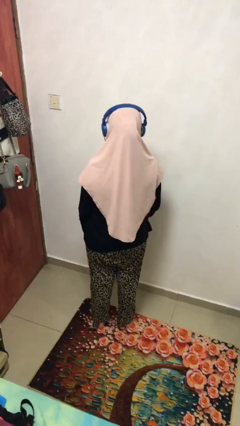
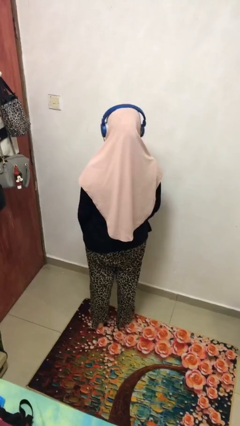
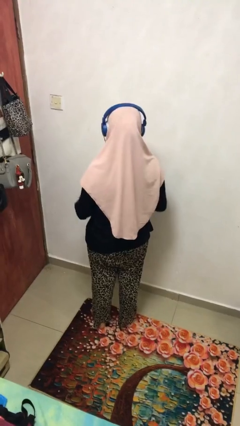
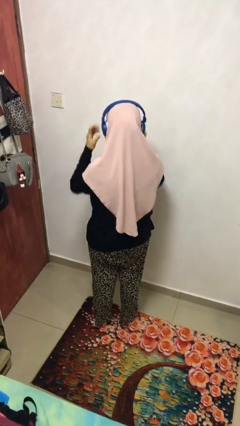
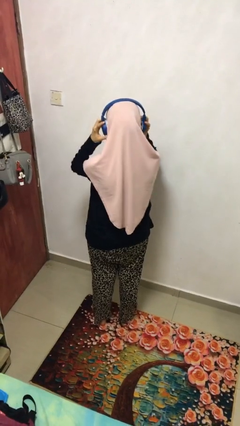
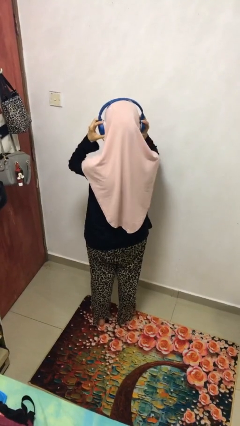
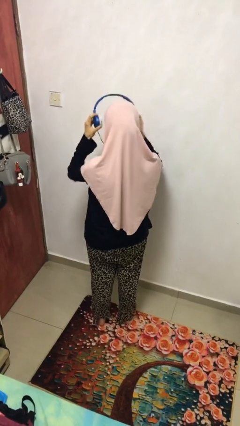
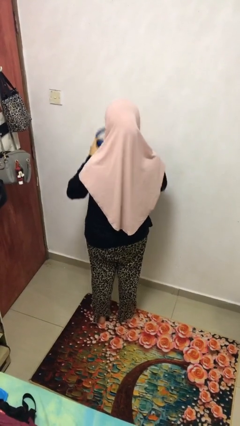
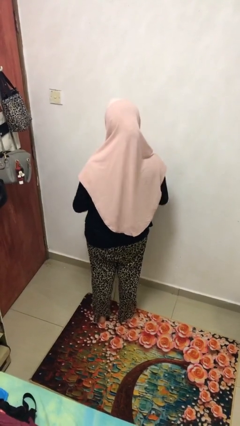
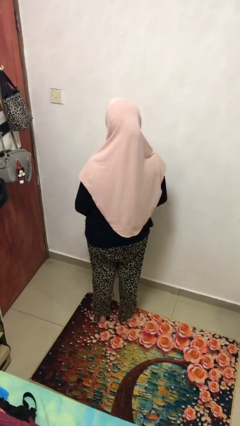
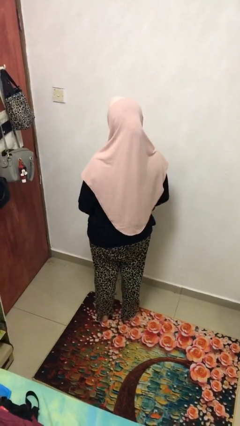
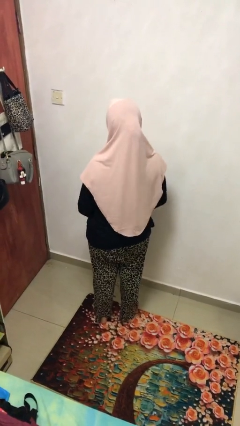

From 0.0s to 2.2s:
person takes off headphones

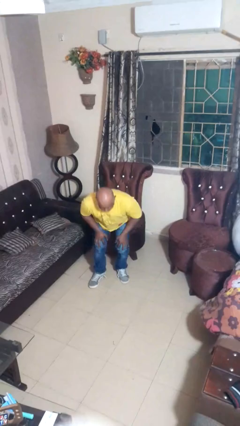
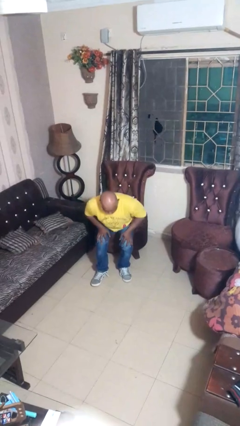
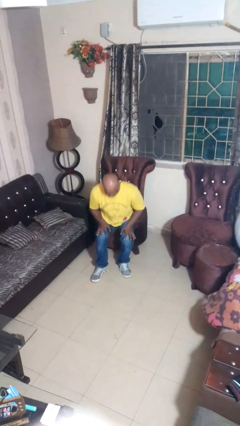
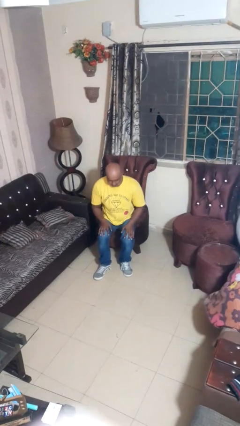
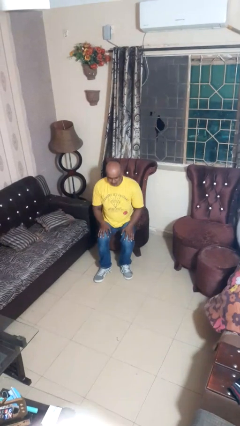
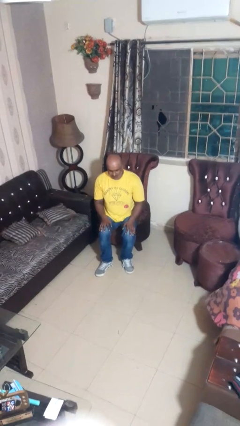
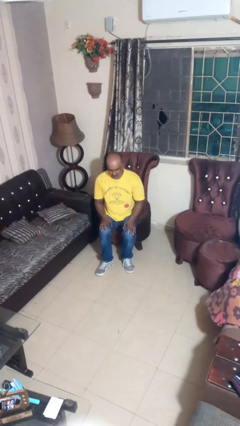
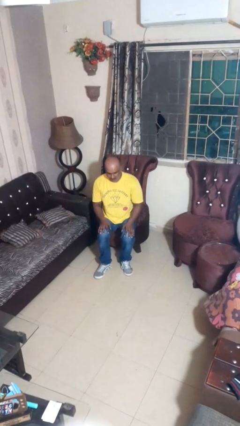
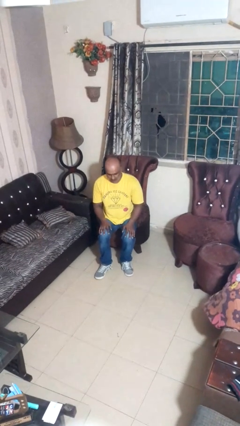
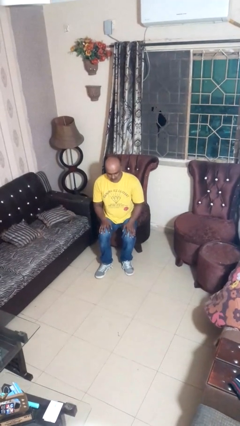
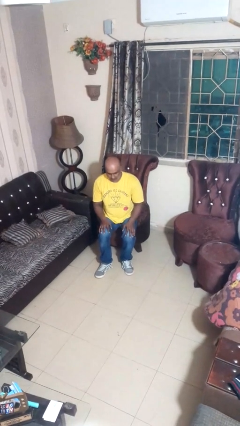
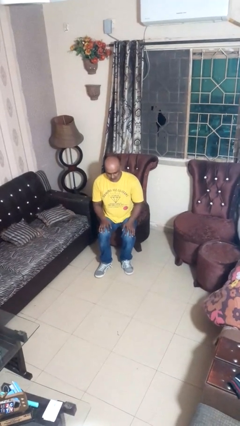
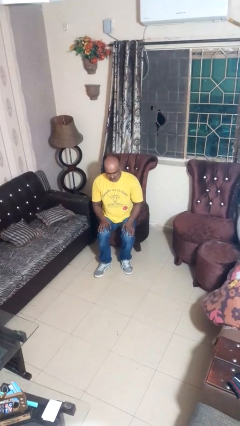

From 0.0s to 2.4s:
person sits down

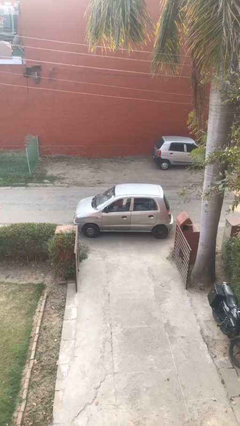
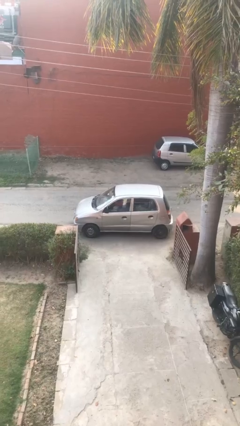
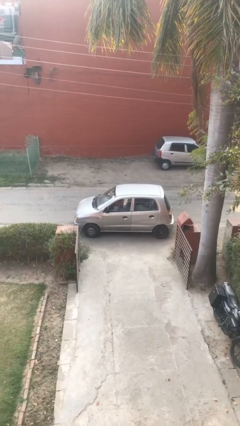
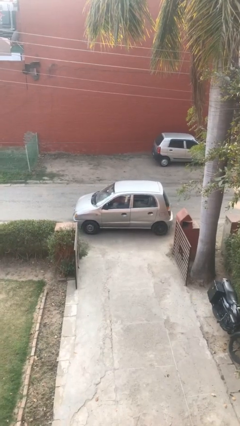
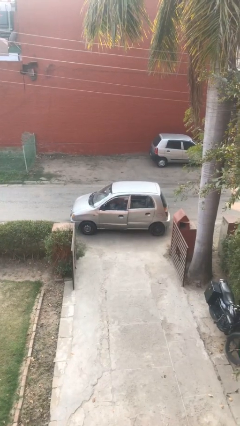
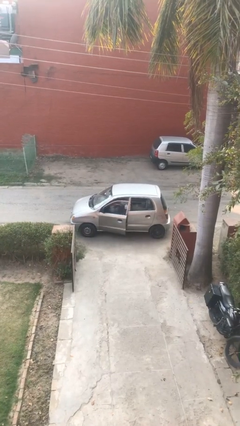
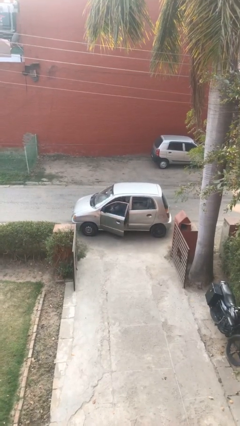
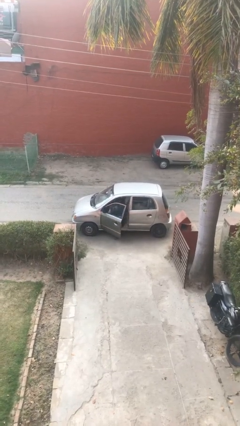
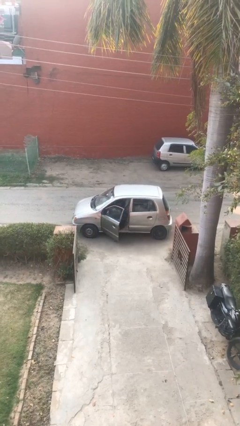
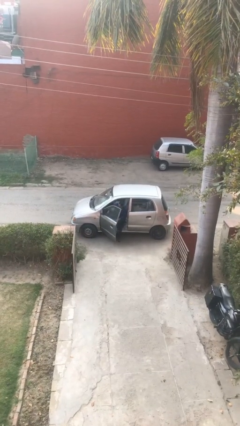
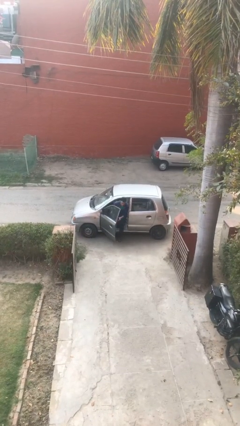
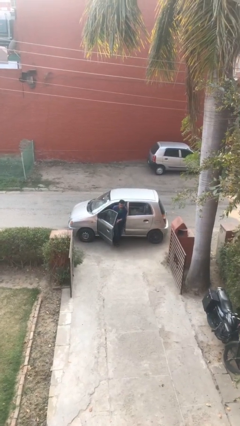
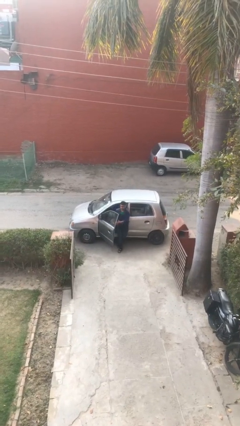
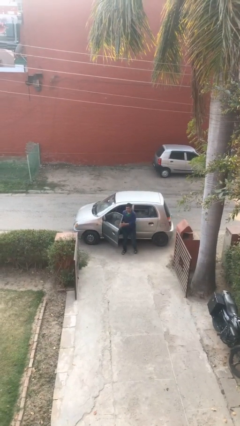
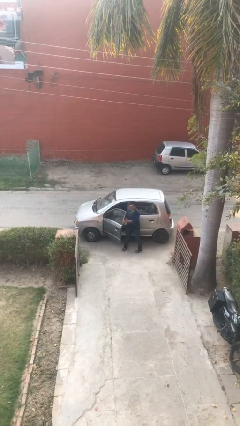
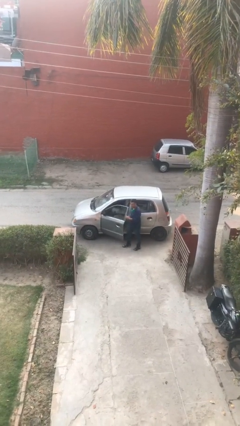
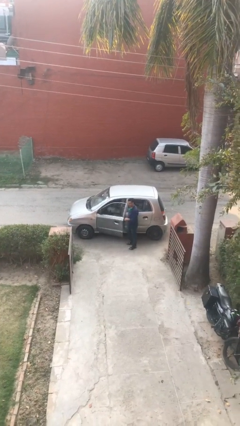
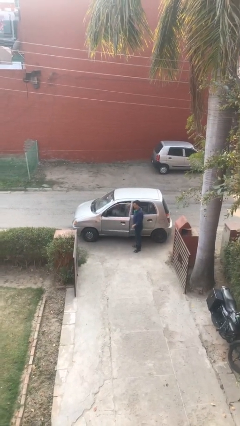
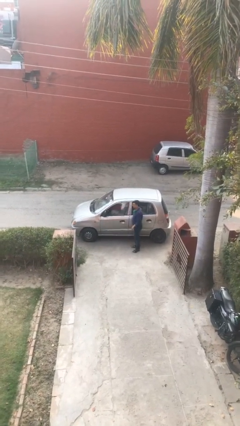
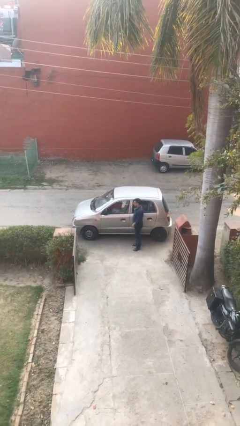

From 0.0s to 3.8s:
car drops off person

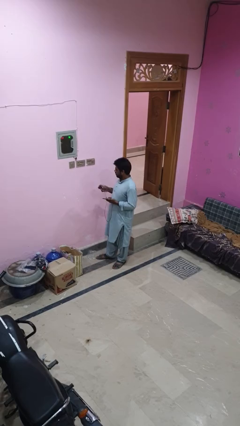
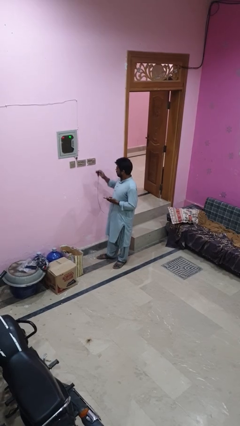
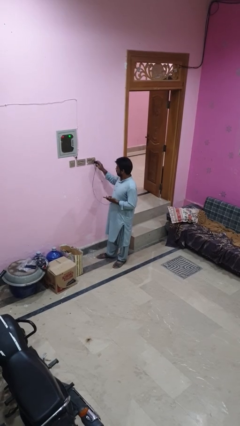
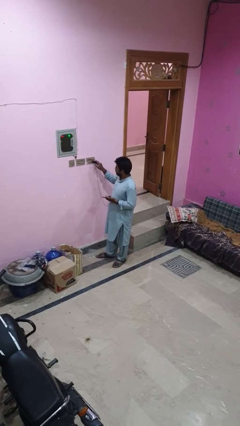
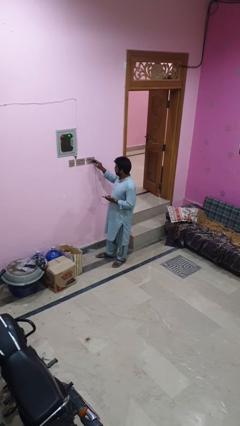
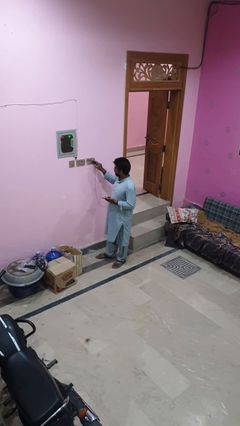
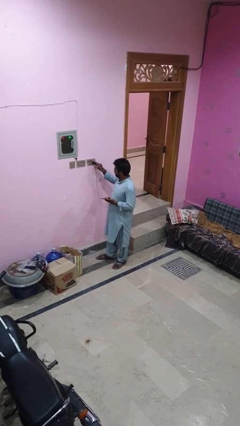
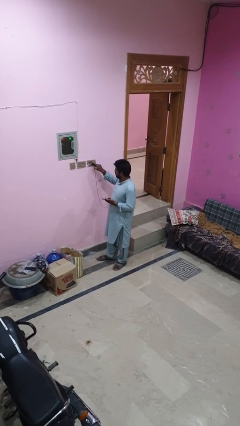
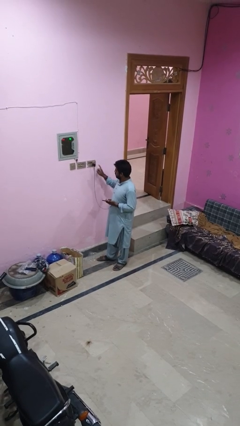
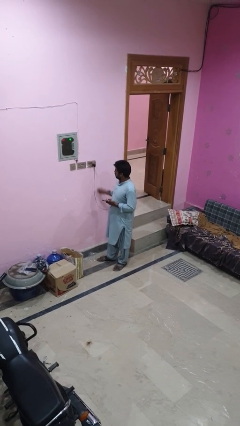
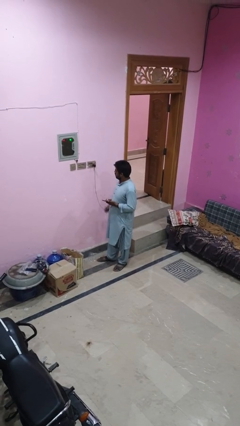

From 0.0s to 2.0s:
person plugs into electrical socket

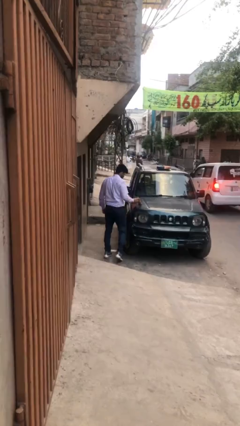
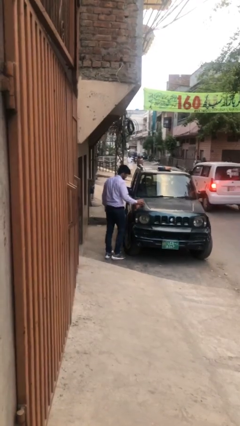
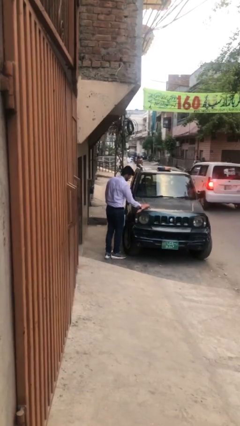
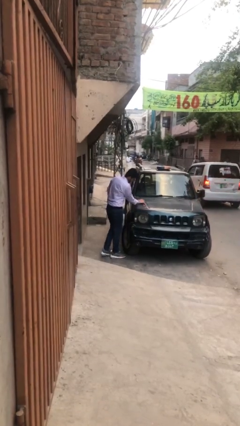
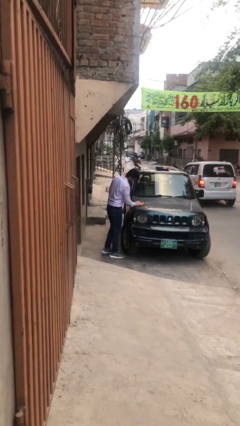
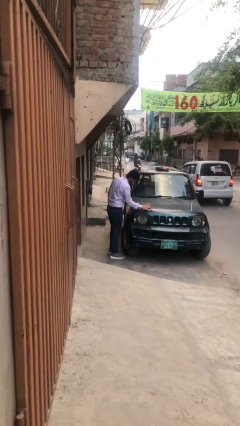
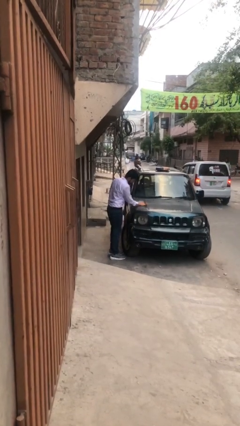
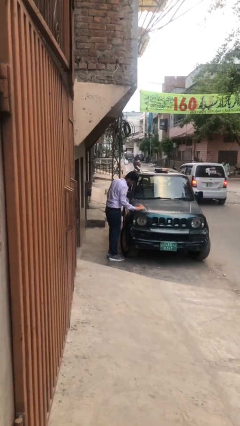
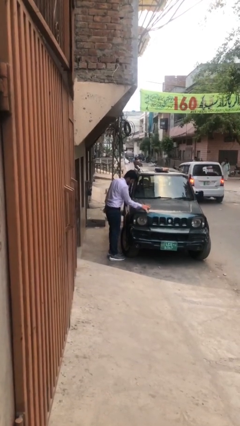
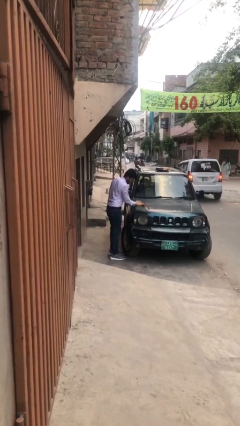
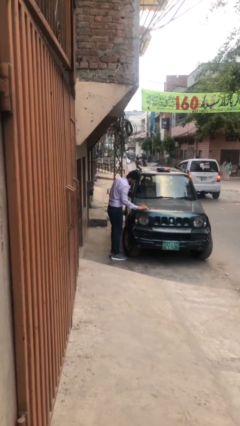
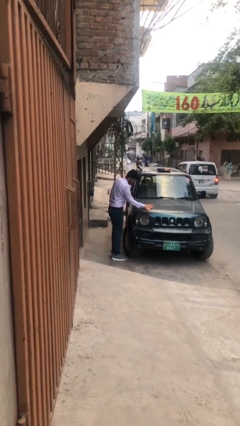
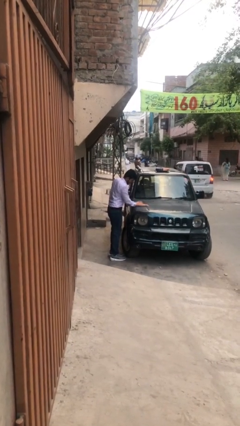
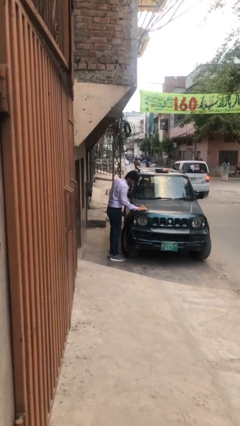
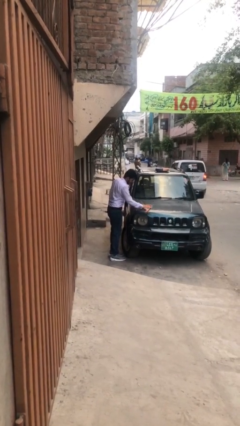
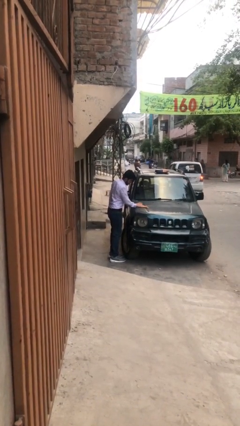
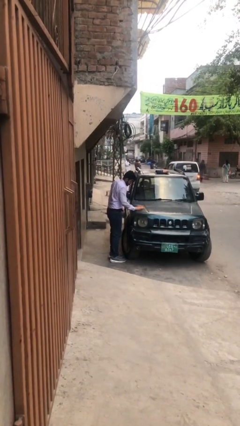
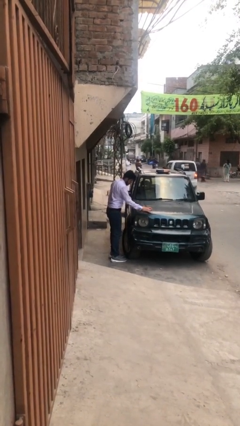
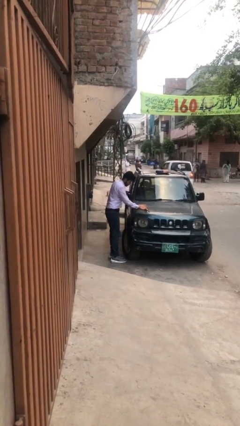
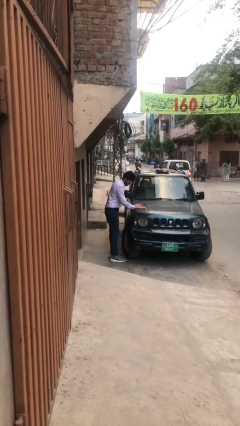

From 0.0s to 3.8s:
person polishes car with rag

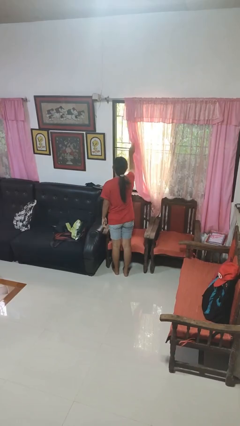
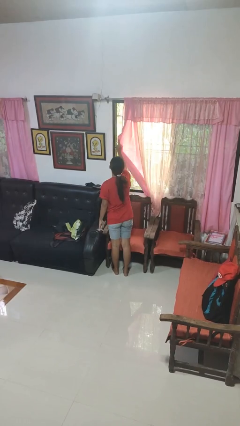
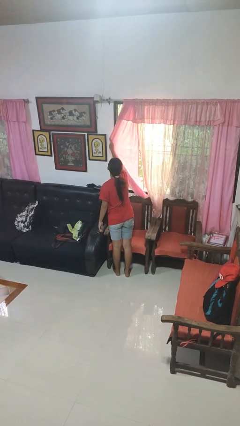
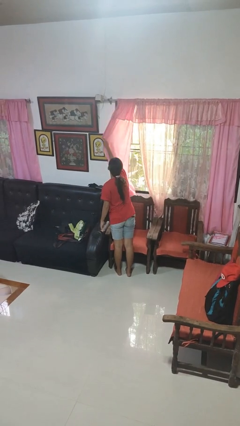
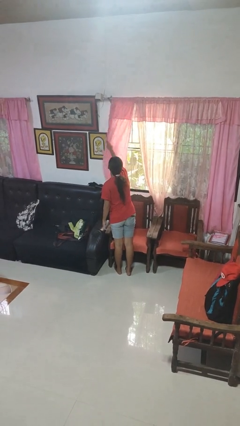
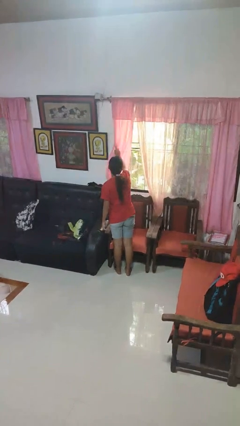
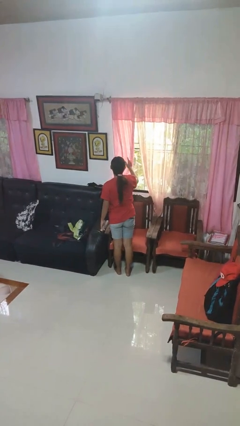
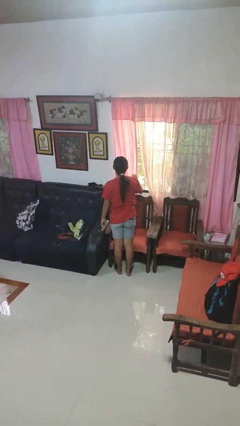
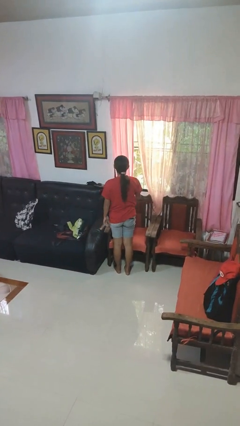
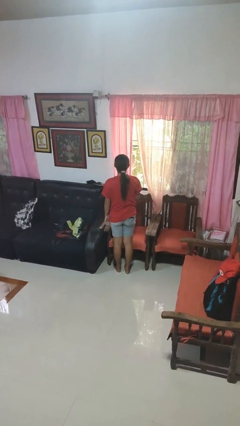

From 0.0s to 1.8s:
person closes curtains

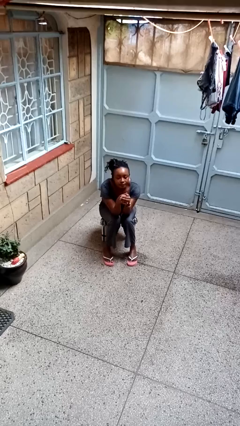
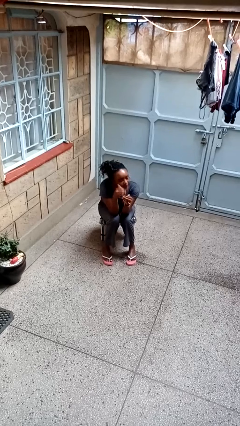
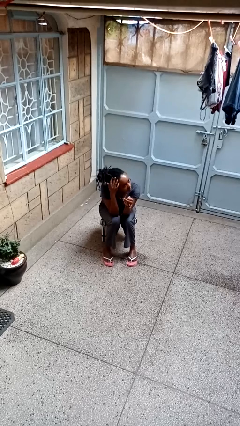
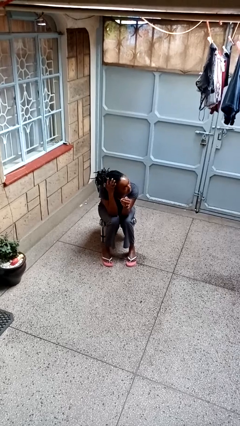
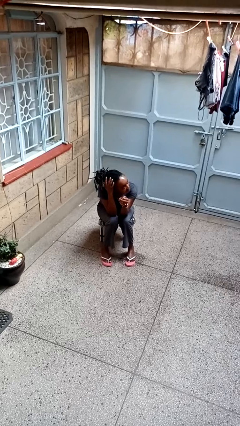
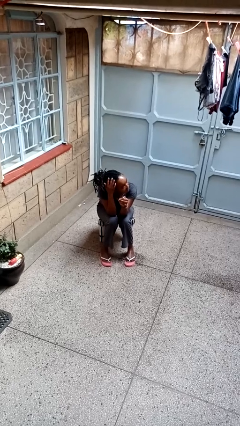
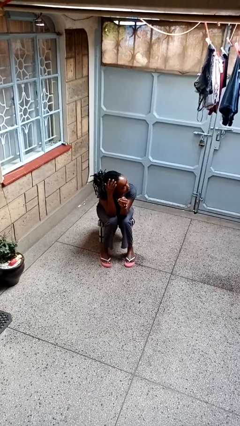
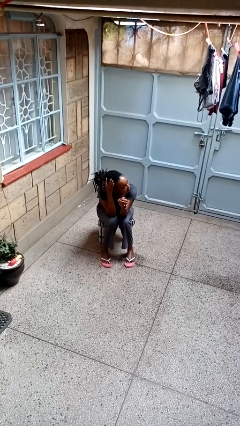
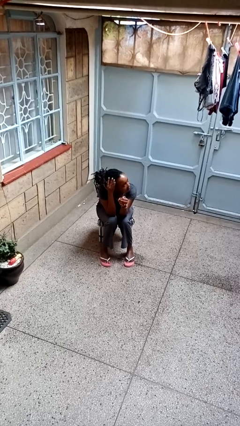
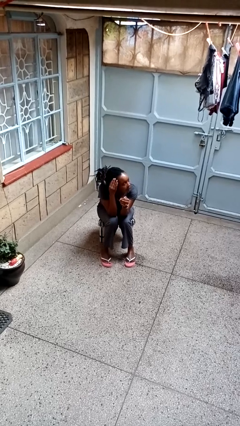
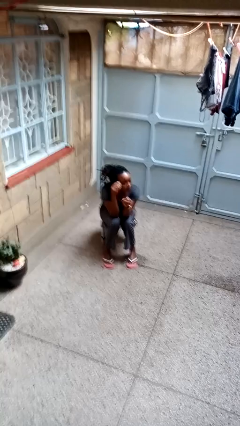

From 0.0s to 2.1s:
person strokes hair
